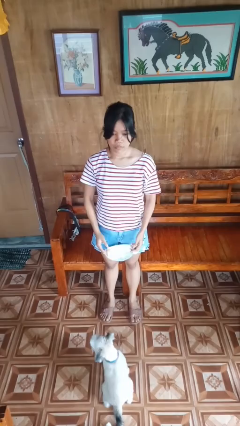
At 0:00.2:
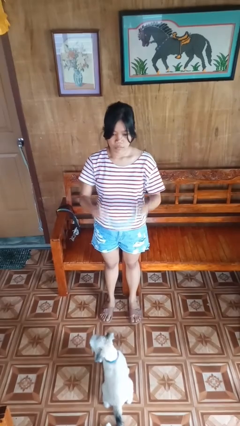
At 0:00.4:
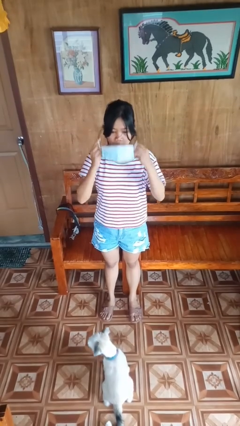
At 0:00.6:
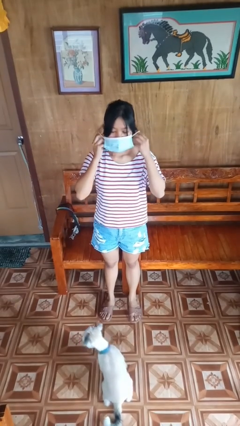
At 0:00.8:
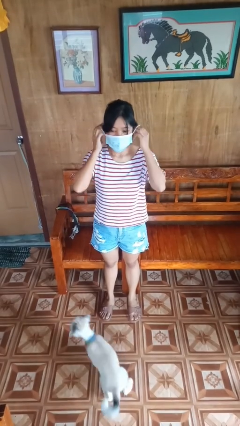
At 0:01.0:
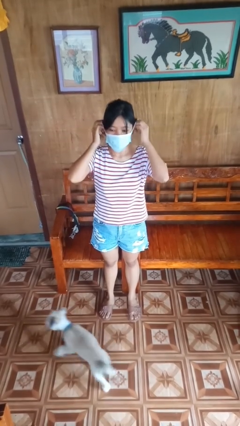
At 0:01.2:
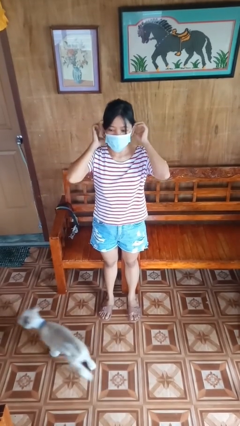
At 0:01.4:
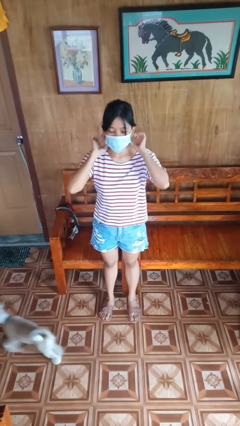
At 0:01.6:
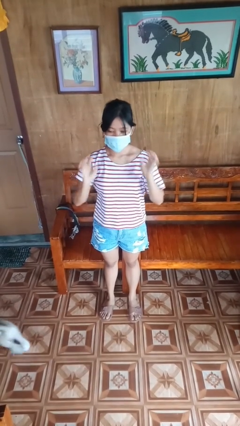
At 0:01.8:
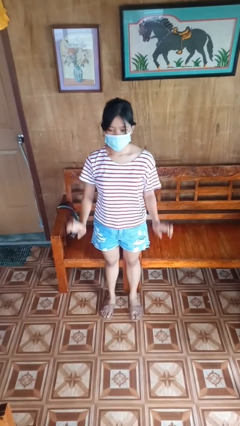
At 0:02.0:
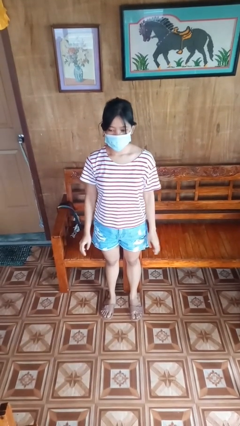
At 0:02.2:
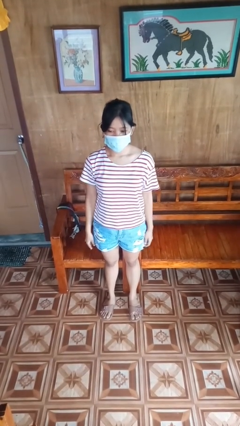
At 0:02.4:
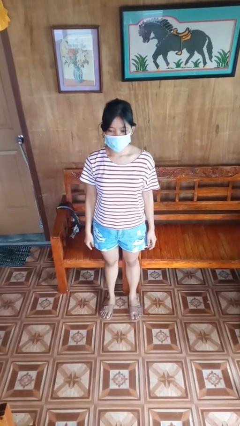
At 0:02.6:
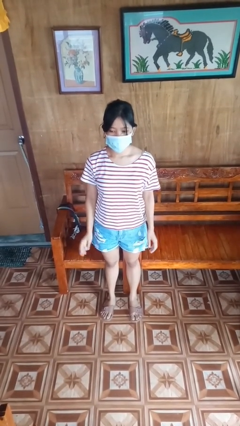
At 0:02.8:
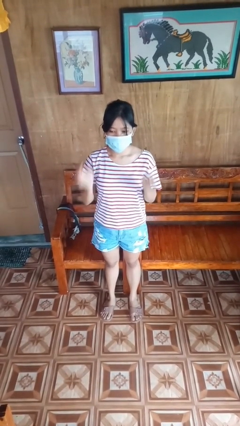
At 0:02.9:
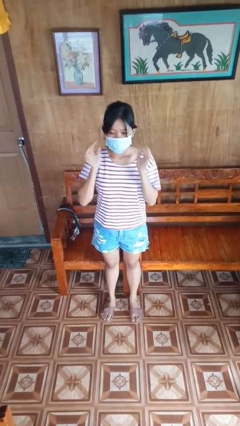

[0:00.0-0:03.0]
person puts on facemask

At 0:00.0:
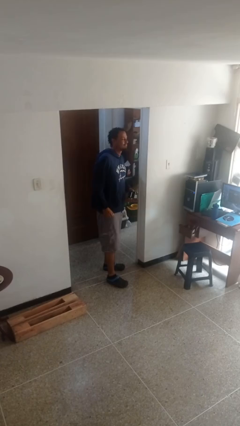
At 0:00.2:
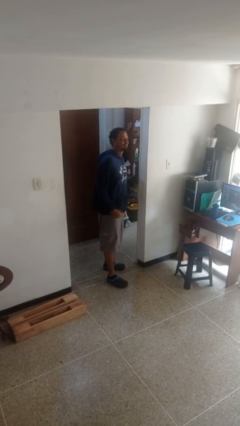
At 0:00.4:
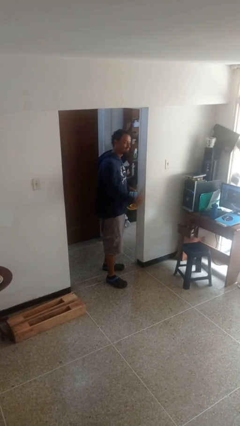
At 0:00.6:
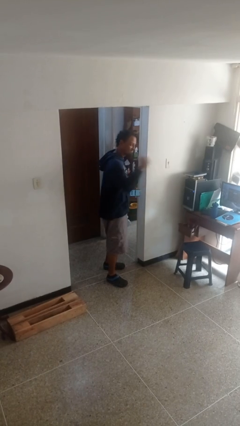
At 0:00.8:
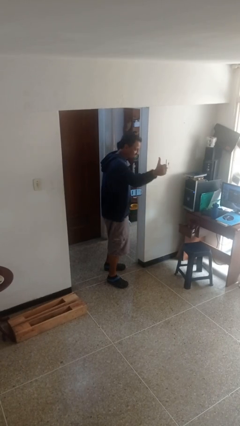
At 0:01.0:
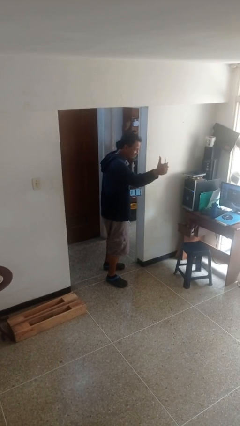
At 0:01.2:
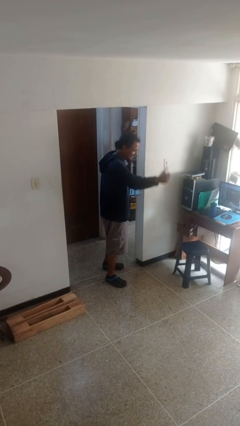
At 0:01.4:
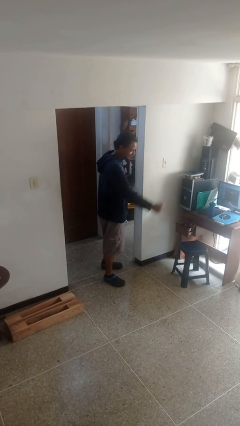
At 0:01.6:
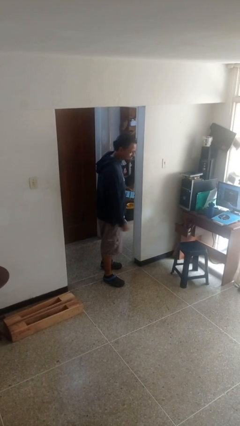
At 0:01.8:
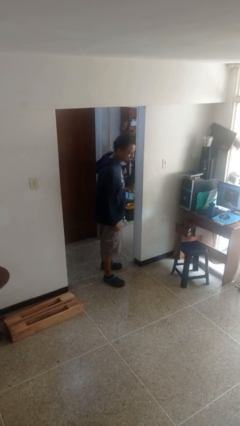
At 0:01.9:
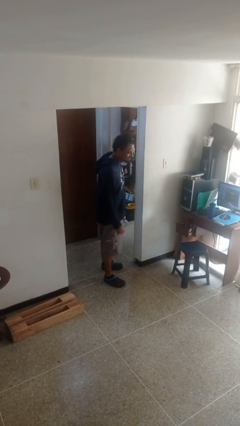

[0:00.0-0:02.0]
person gestures thumbs up

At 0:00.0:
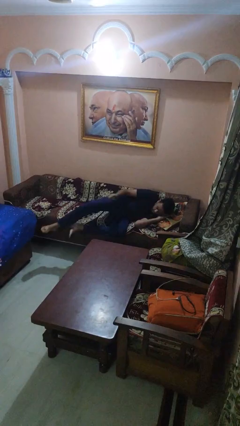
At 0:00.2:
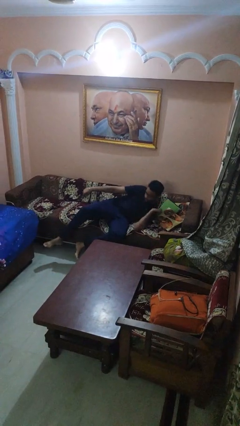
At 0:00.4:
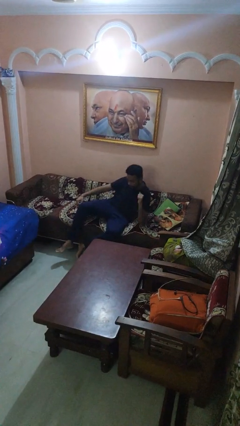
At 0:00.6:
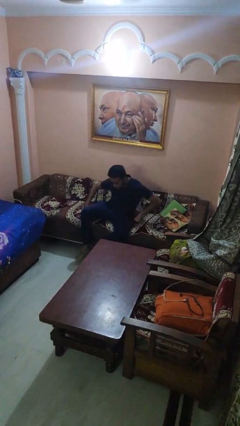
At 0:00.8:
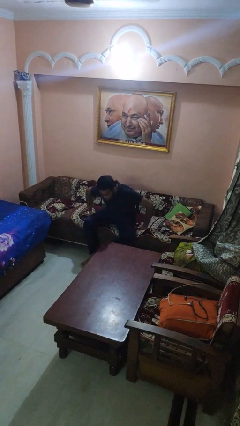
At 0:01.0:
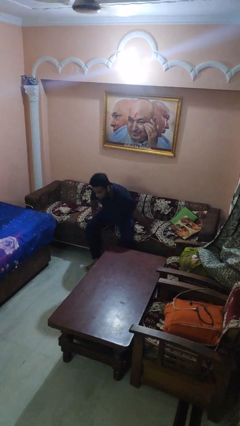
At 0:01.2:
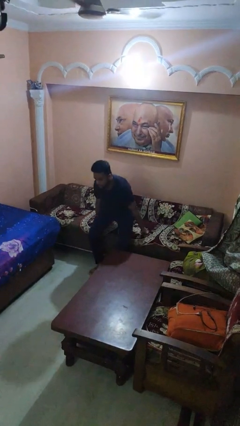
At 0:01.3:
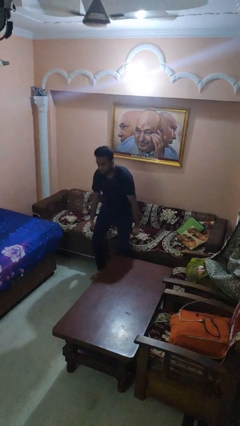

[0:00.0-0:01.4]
person stands up

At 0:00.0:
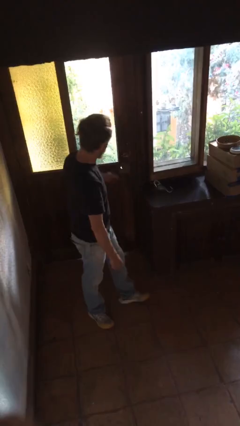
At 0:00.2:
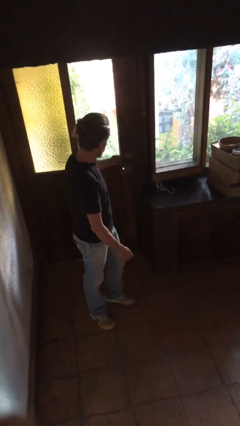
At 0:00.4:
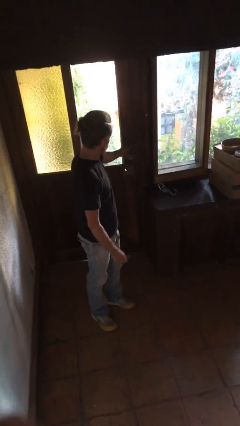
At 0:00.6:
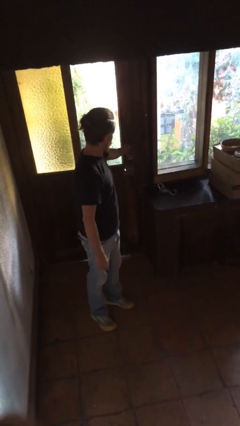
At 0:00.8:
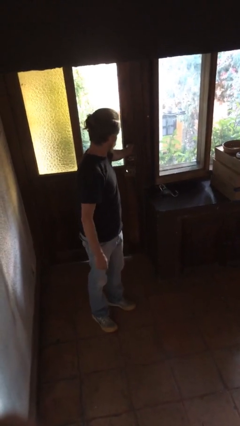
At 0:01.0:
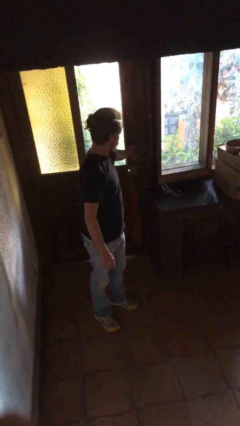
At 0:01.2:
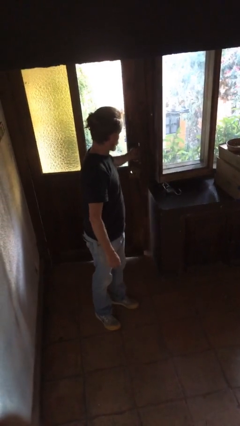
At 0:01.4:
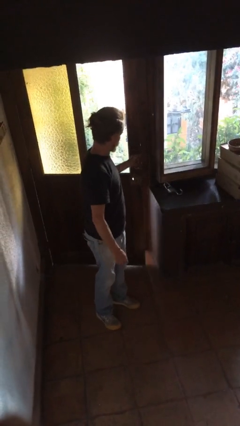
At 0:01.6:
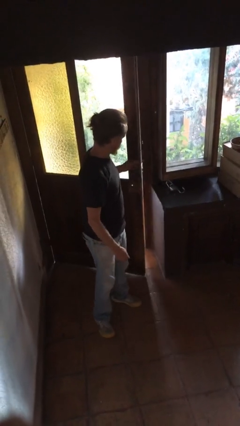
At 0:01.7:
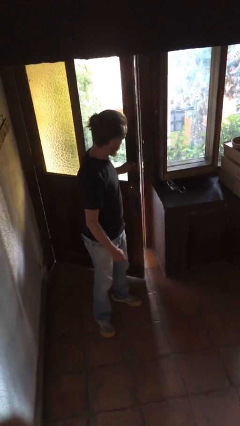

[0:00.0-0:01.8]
person opens facility door

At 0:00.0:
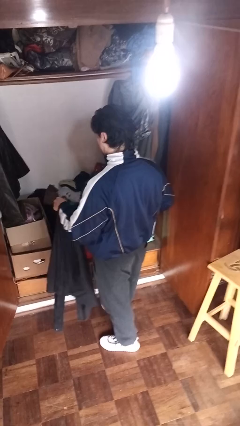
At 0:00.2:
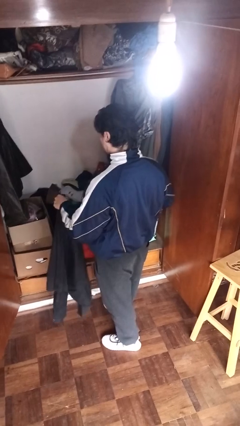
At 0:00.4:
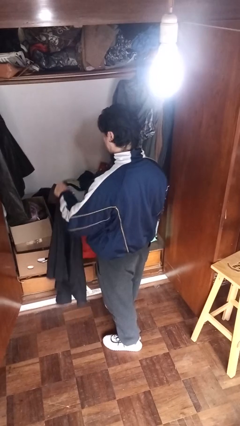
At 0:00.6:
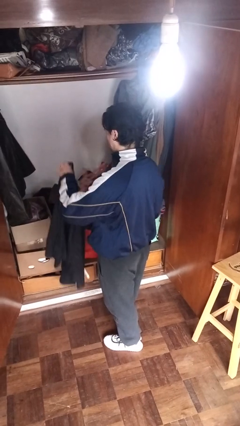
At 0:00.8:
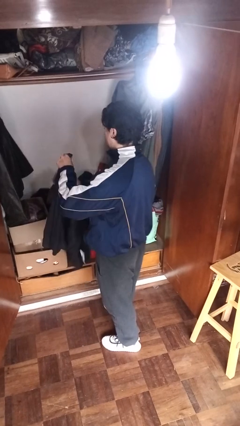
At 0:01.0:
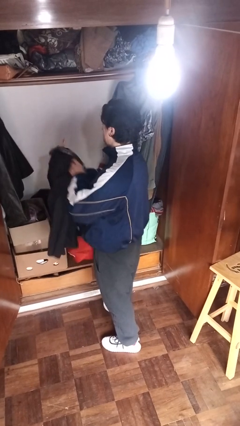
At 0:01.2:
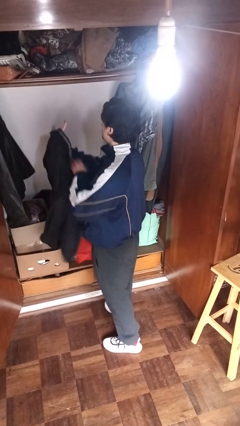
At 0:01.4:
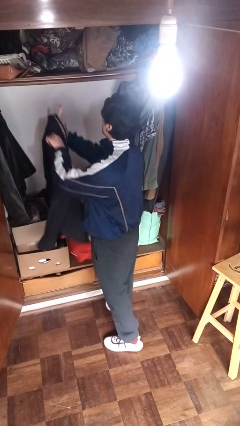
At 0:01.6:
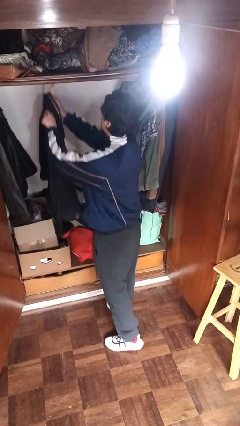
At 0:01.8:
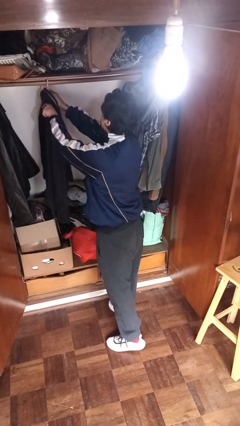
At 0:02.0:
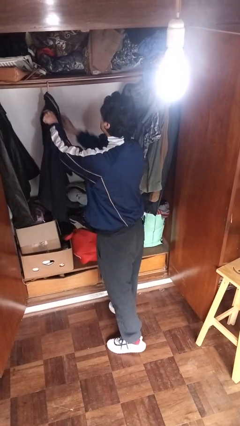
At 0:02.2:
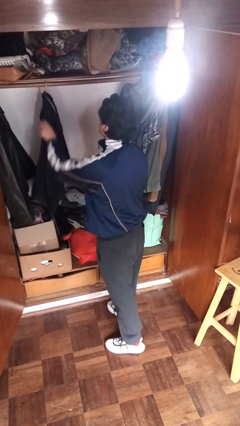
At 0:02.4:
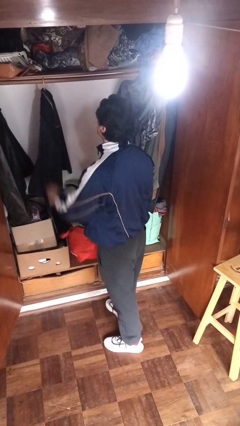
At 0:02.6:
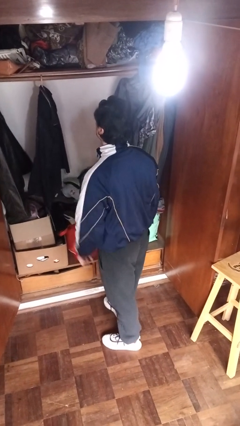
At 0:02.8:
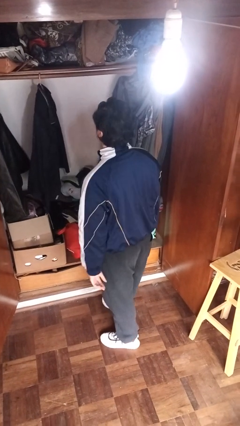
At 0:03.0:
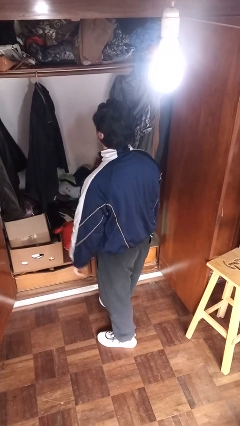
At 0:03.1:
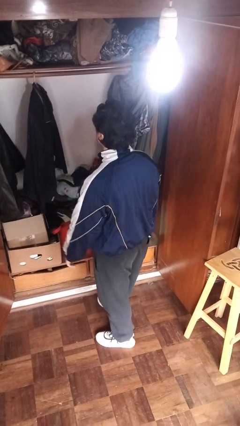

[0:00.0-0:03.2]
person puts clothes into closet

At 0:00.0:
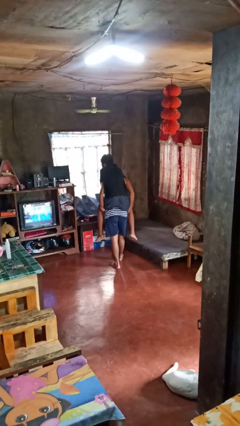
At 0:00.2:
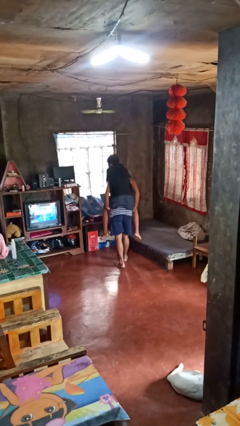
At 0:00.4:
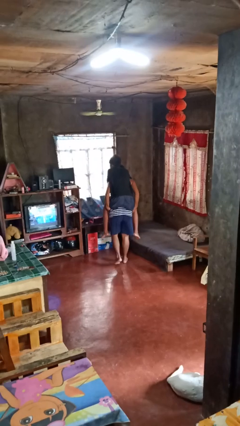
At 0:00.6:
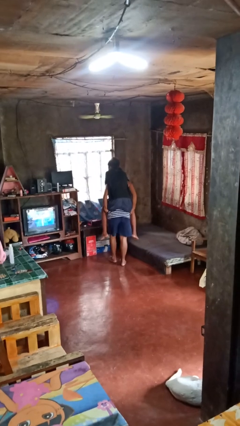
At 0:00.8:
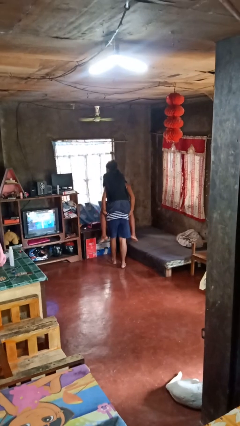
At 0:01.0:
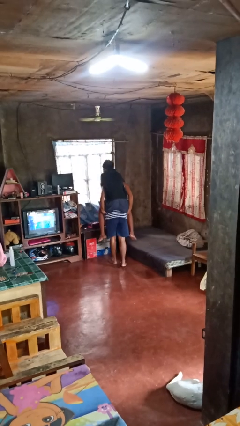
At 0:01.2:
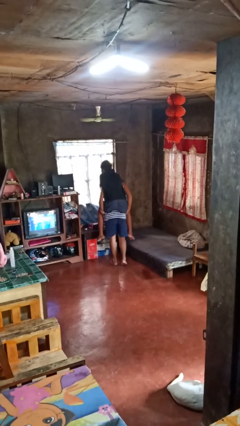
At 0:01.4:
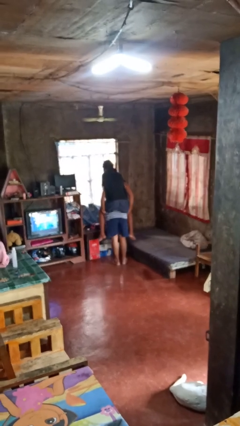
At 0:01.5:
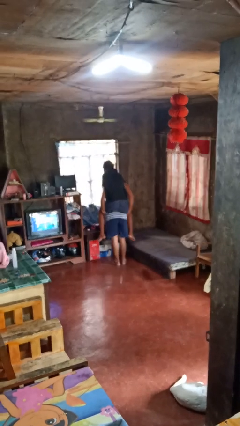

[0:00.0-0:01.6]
person carries person on back

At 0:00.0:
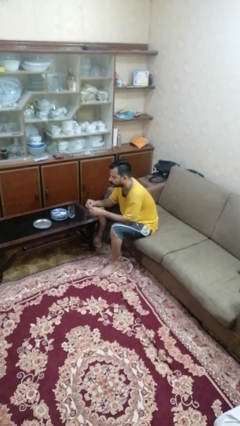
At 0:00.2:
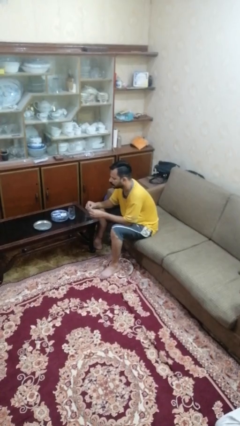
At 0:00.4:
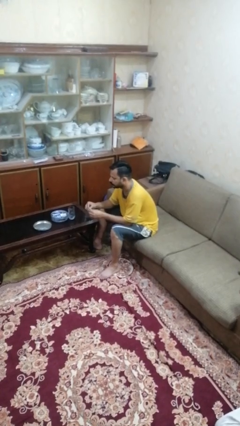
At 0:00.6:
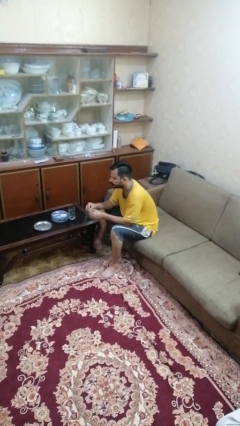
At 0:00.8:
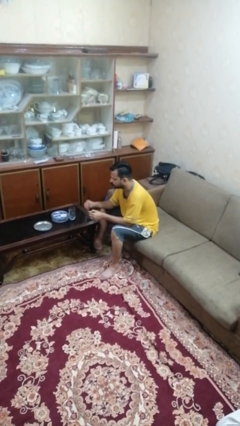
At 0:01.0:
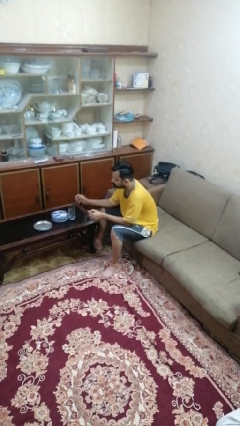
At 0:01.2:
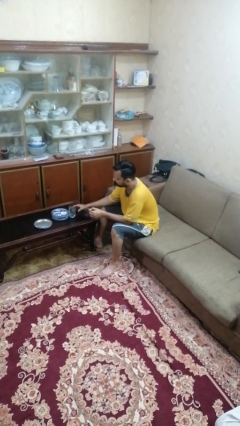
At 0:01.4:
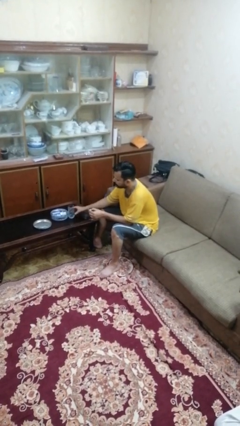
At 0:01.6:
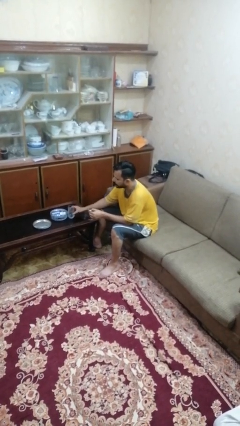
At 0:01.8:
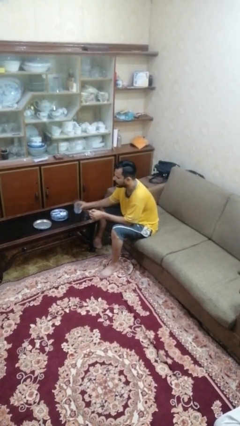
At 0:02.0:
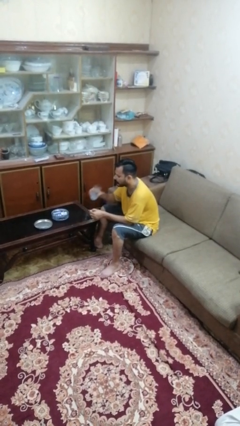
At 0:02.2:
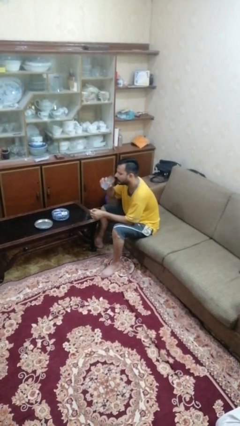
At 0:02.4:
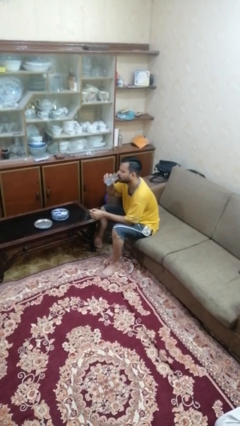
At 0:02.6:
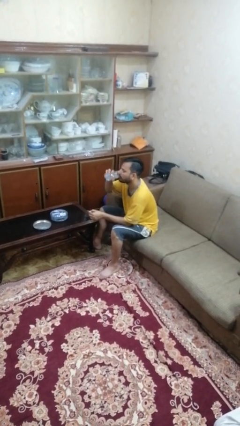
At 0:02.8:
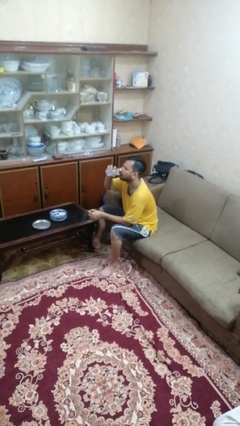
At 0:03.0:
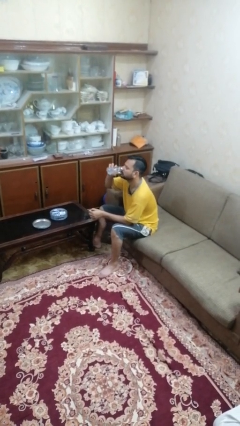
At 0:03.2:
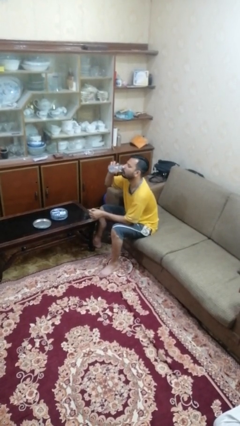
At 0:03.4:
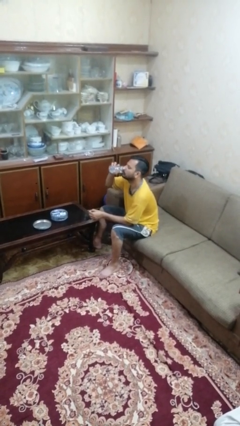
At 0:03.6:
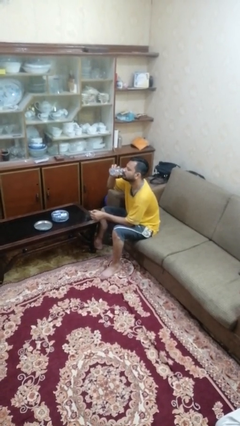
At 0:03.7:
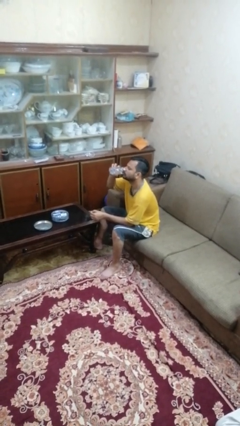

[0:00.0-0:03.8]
person drinks from cup

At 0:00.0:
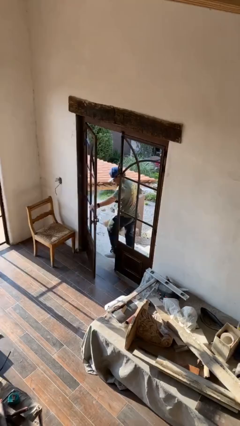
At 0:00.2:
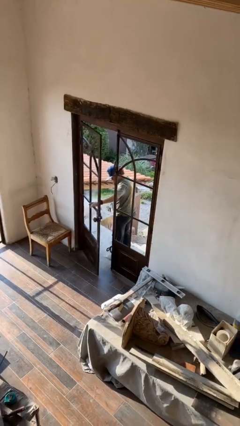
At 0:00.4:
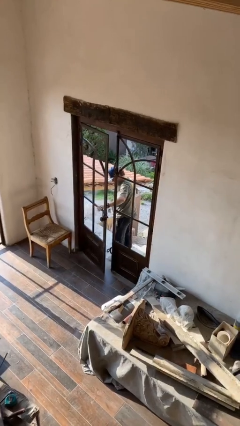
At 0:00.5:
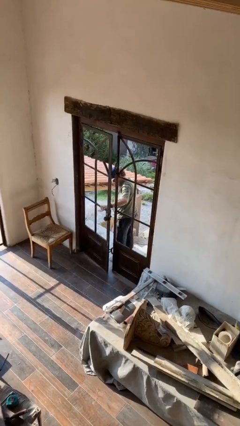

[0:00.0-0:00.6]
person closes facility door
